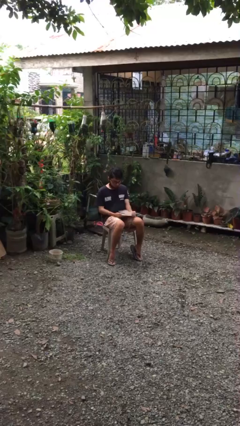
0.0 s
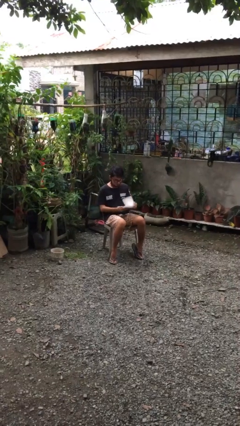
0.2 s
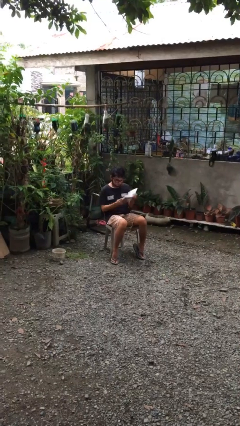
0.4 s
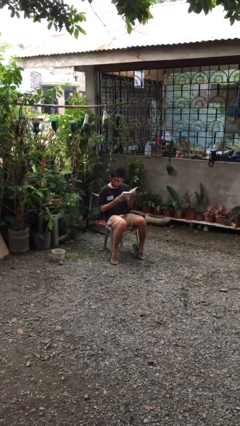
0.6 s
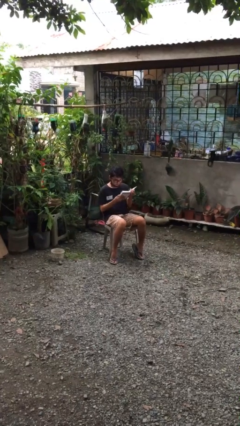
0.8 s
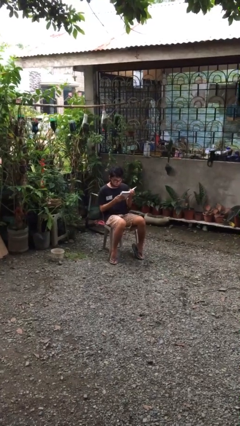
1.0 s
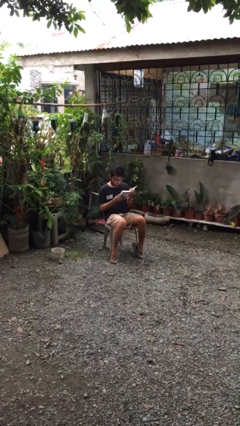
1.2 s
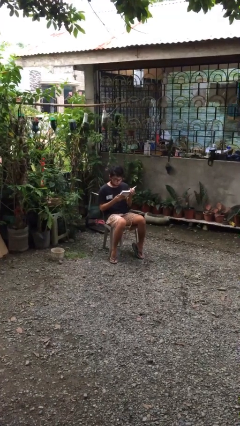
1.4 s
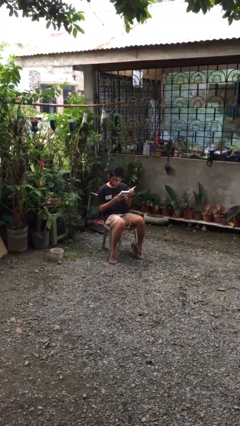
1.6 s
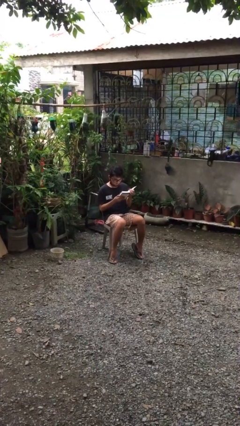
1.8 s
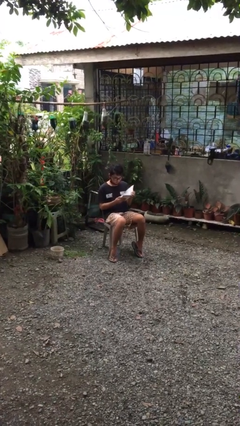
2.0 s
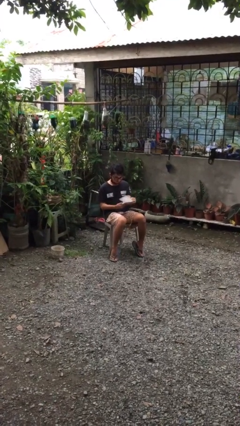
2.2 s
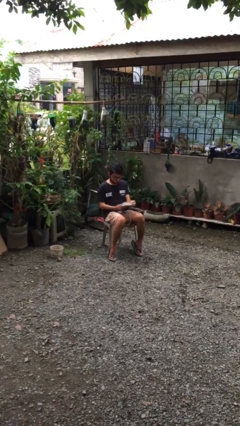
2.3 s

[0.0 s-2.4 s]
person reads document

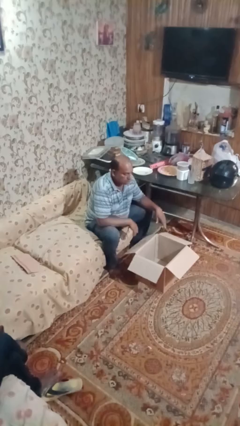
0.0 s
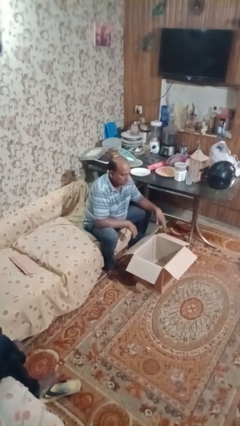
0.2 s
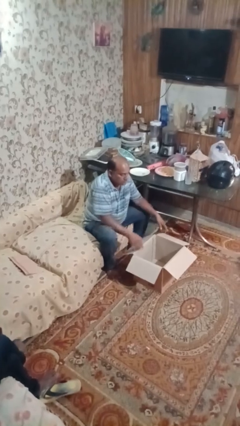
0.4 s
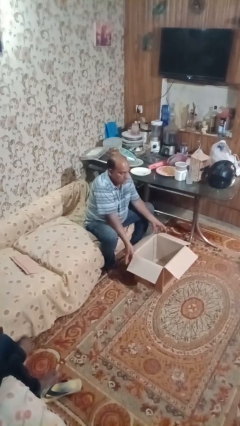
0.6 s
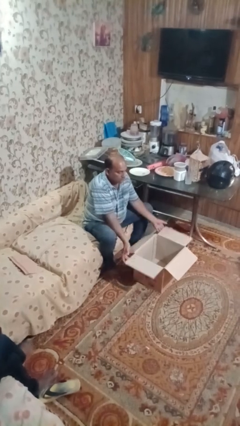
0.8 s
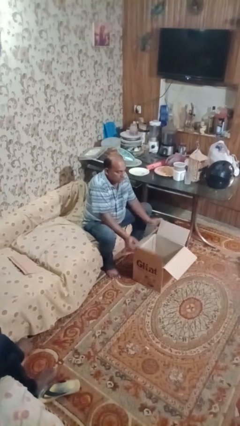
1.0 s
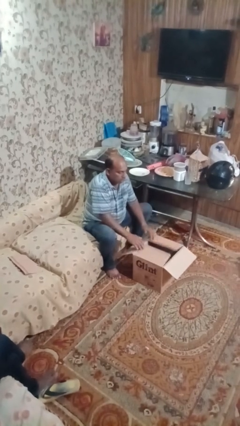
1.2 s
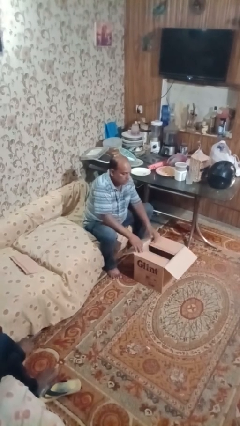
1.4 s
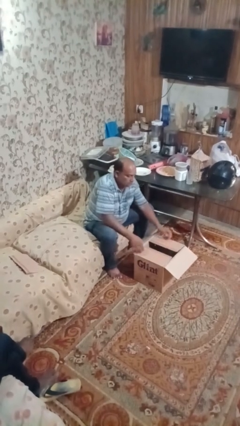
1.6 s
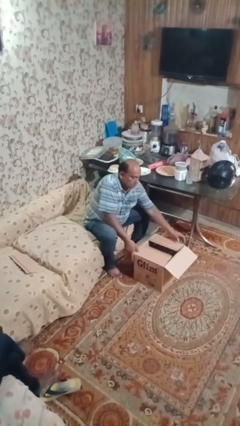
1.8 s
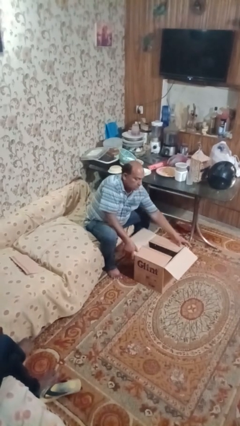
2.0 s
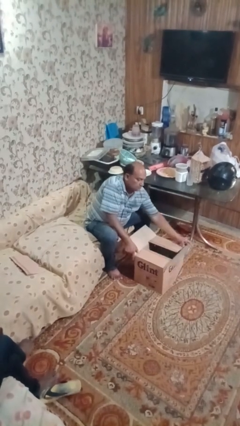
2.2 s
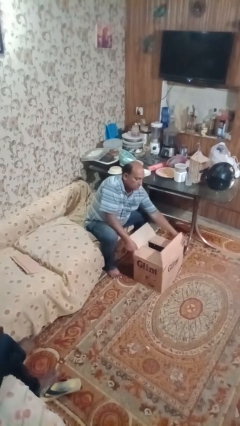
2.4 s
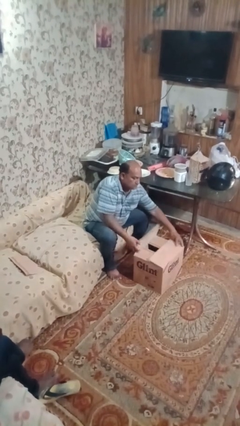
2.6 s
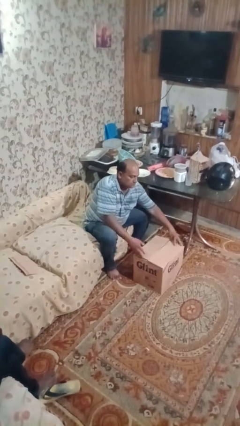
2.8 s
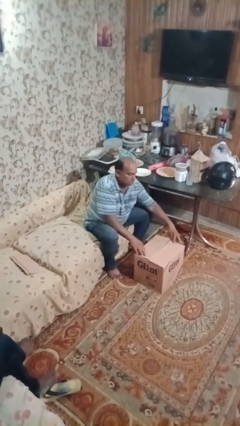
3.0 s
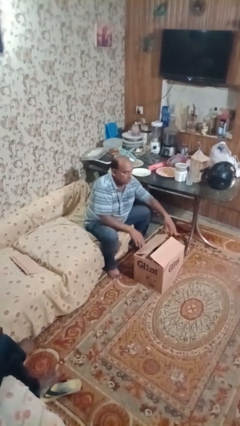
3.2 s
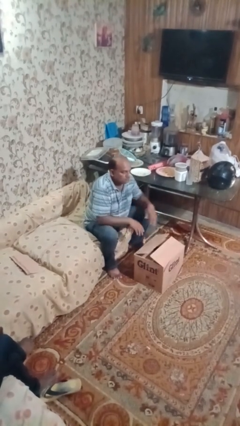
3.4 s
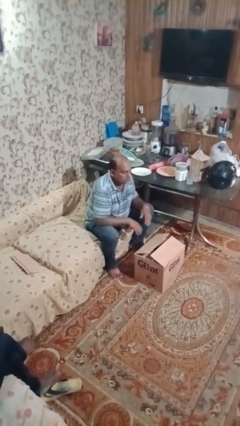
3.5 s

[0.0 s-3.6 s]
person closes box

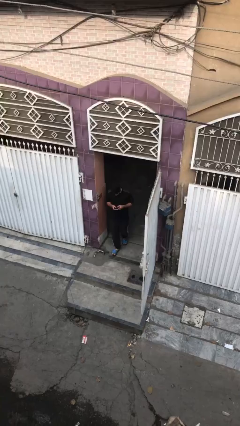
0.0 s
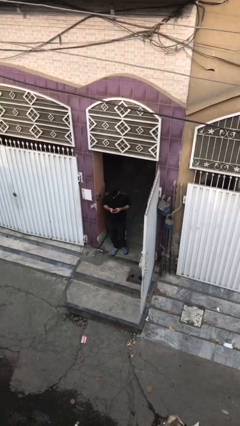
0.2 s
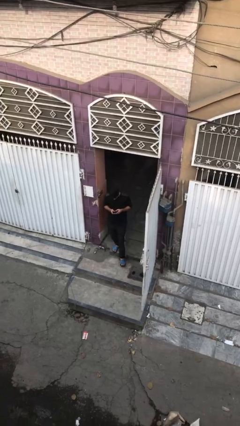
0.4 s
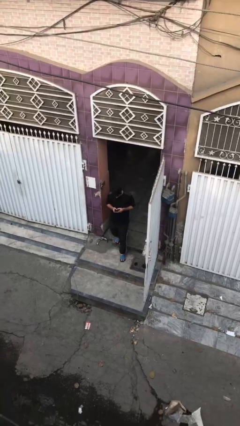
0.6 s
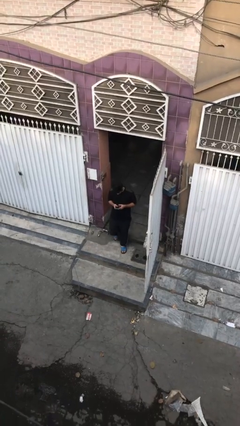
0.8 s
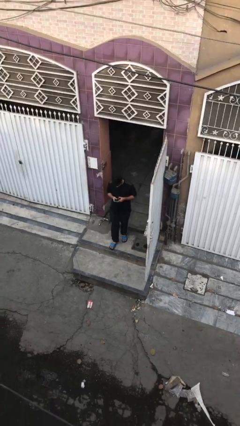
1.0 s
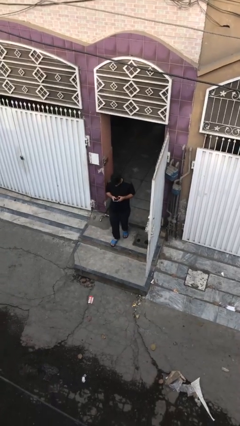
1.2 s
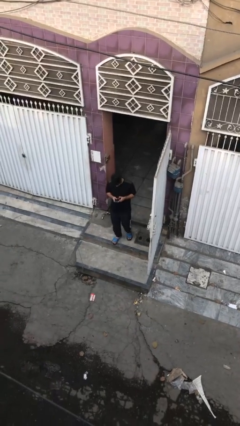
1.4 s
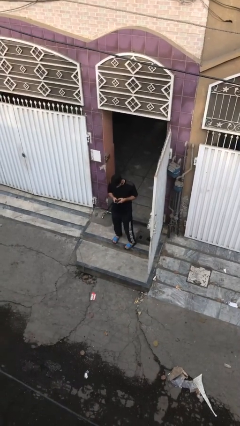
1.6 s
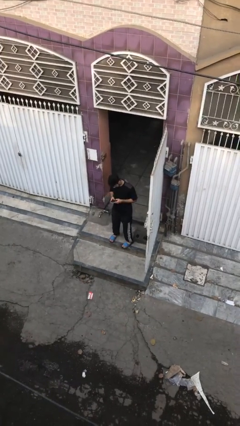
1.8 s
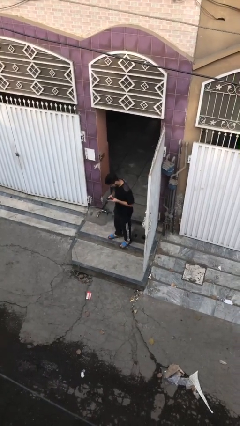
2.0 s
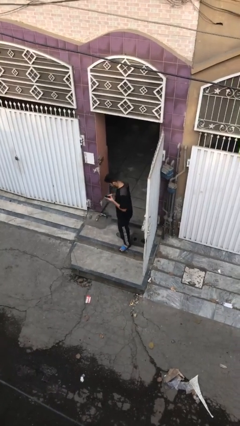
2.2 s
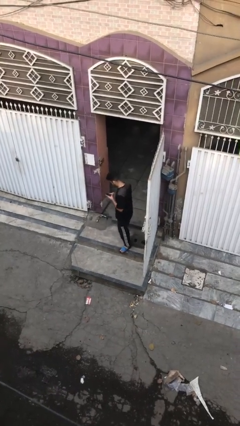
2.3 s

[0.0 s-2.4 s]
person enters scene through structure

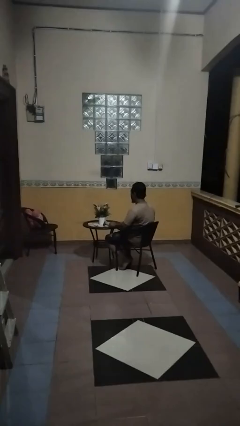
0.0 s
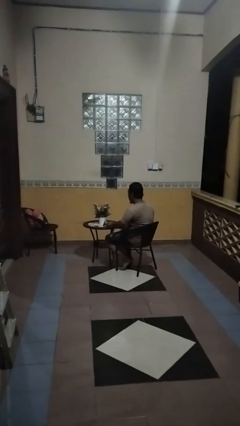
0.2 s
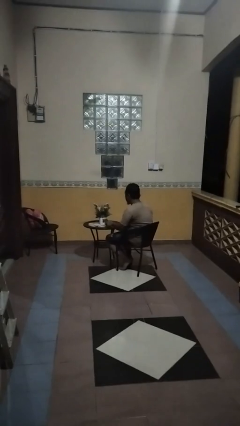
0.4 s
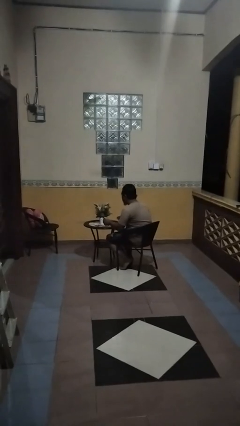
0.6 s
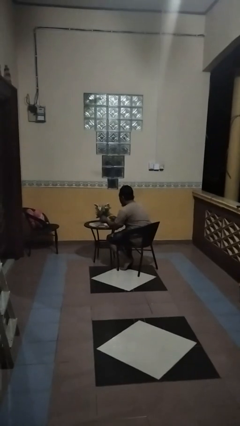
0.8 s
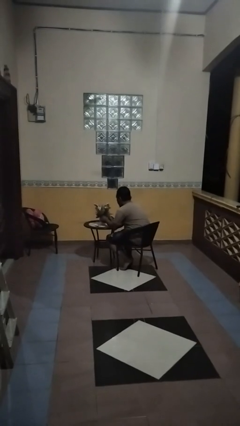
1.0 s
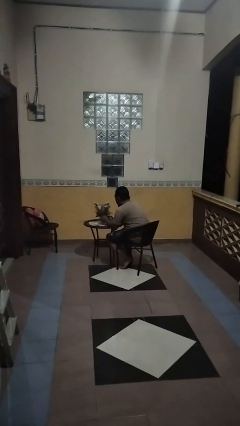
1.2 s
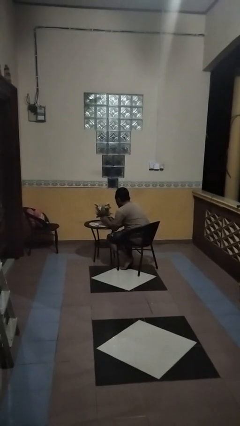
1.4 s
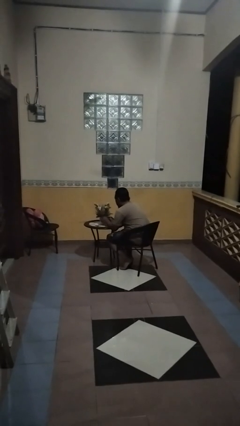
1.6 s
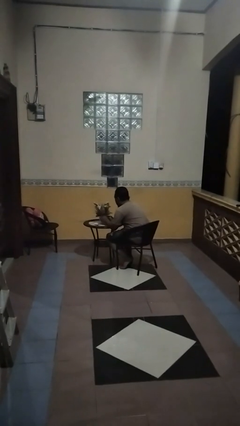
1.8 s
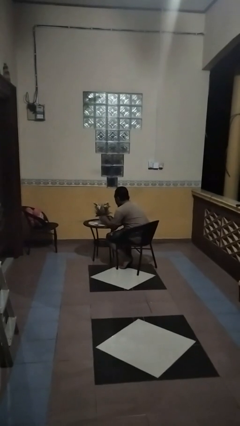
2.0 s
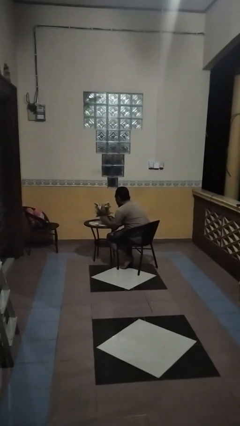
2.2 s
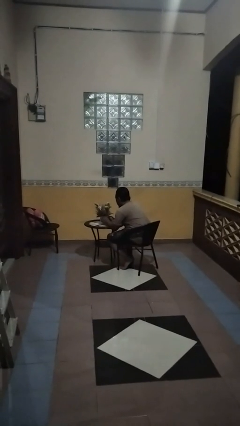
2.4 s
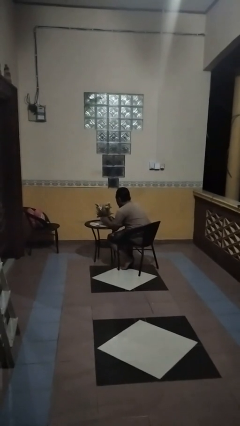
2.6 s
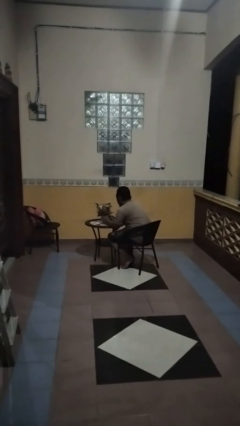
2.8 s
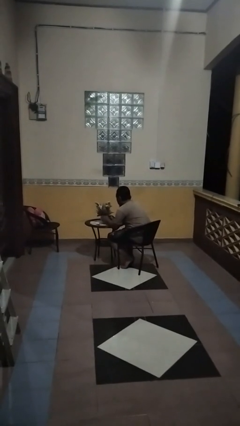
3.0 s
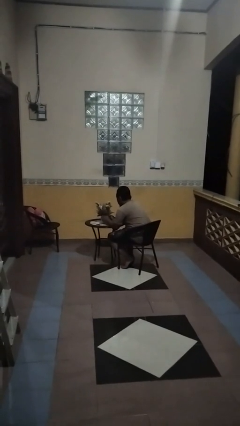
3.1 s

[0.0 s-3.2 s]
person arranges flowers in vase

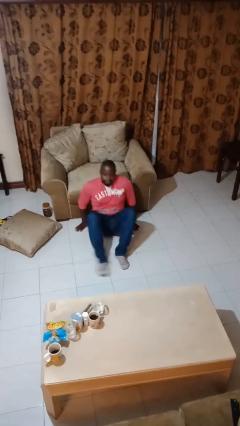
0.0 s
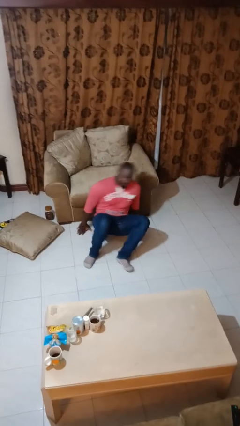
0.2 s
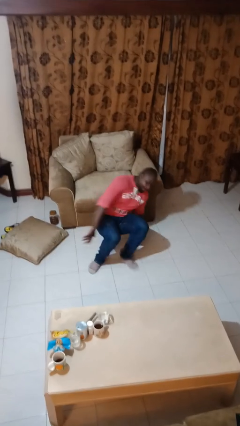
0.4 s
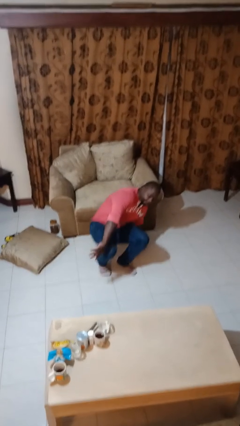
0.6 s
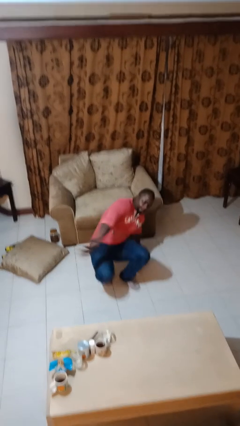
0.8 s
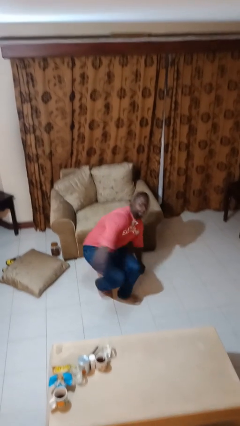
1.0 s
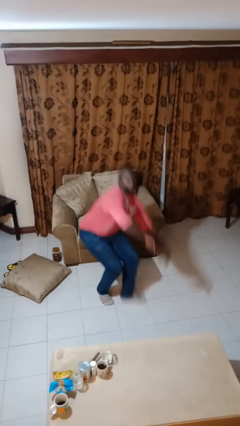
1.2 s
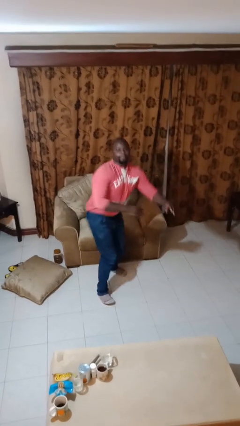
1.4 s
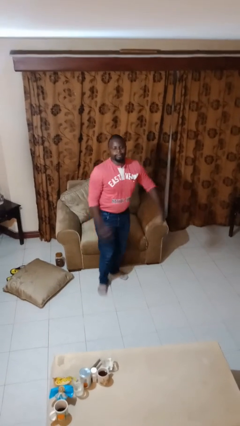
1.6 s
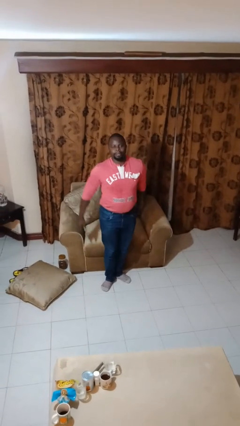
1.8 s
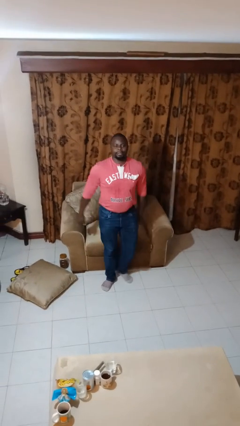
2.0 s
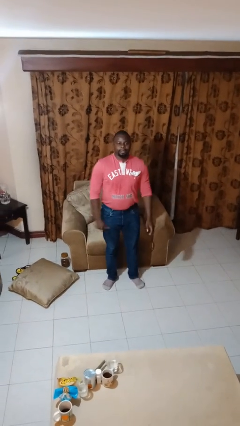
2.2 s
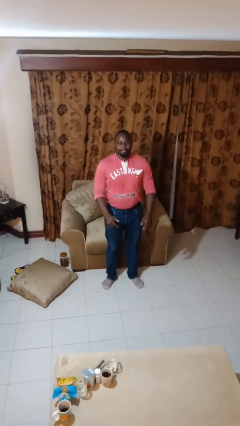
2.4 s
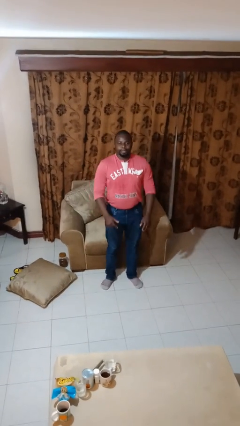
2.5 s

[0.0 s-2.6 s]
person stands up from floor

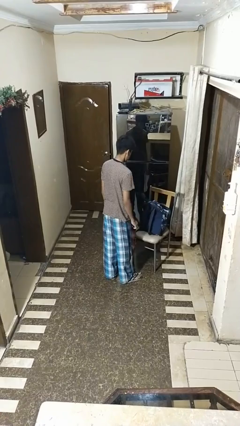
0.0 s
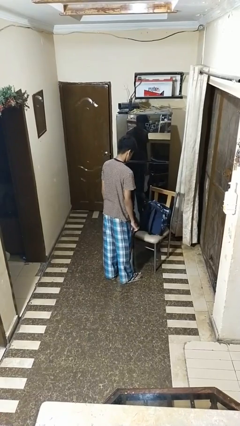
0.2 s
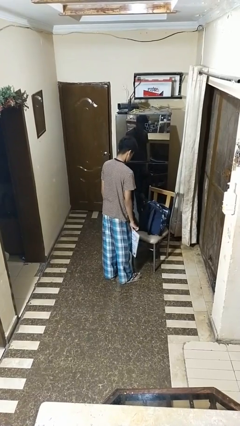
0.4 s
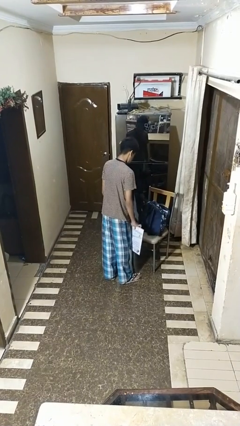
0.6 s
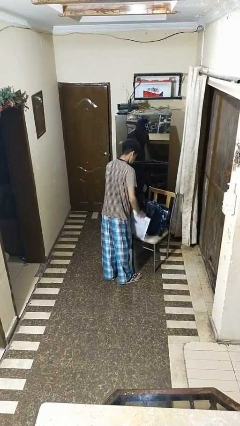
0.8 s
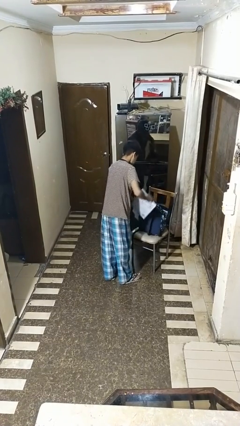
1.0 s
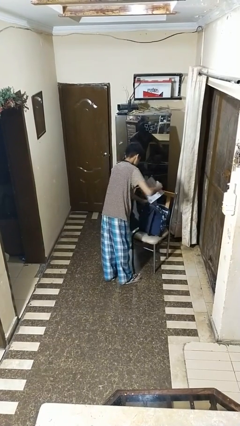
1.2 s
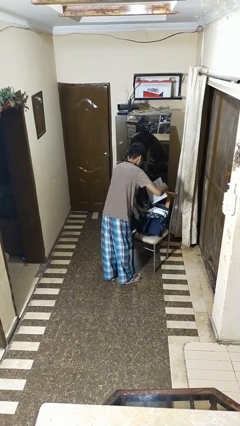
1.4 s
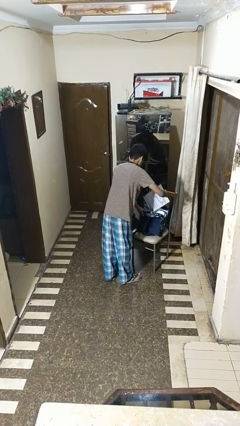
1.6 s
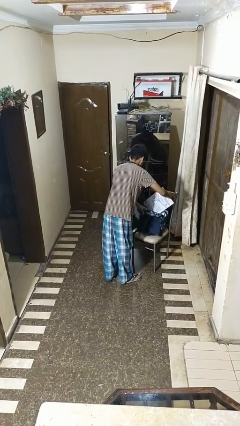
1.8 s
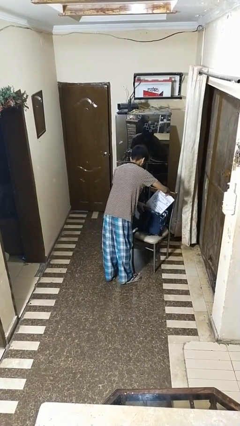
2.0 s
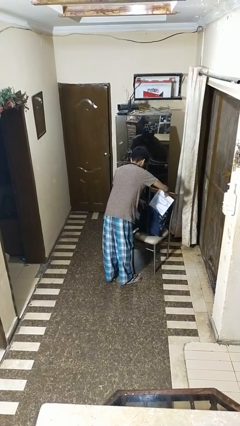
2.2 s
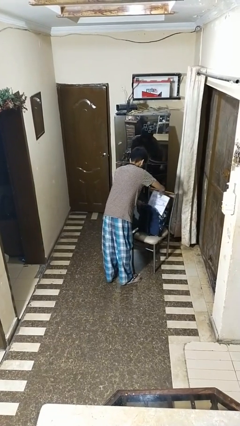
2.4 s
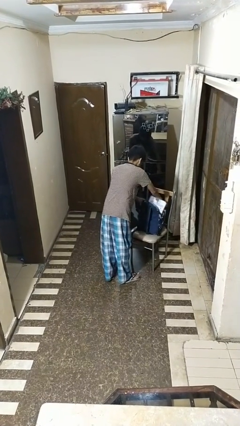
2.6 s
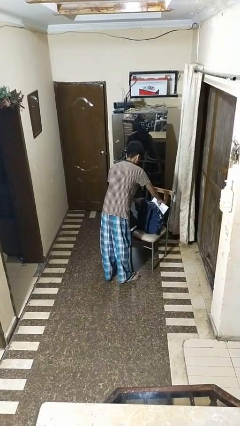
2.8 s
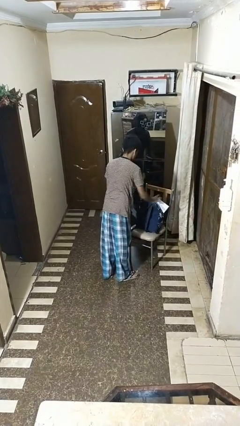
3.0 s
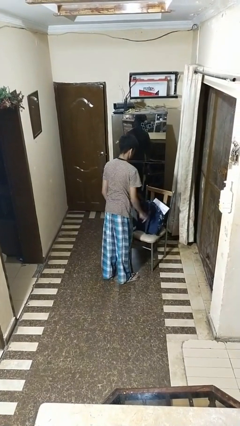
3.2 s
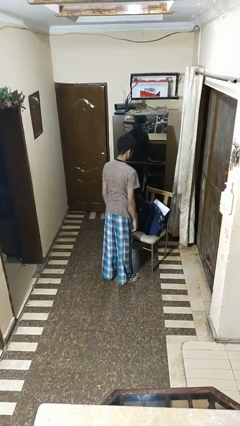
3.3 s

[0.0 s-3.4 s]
person puts object into bag
